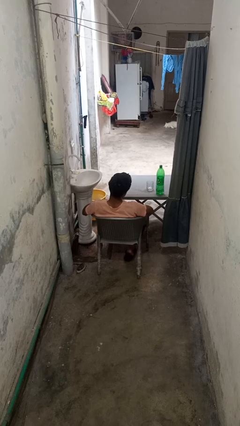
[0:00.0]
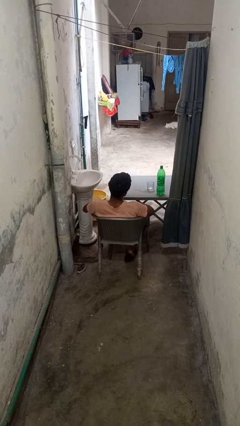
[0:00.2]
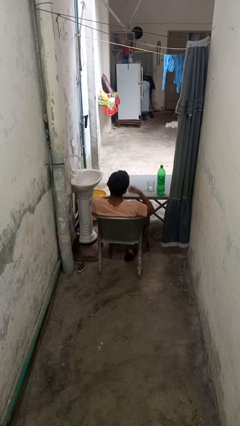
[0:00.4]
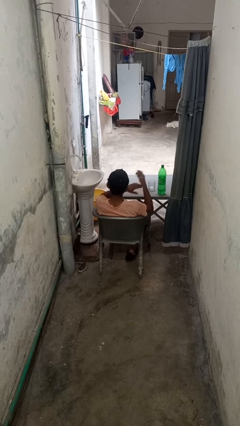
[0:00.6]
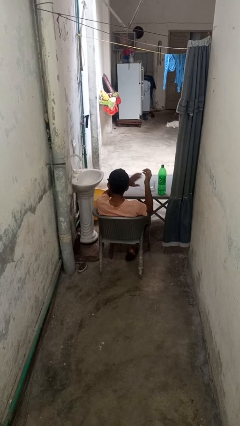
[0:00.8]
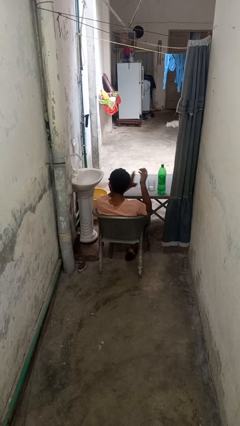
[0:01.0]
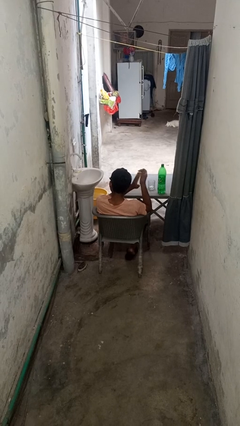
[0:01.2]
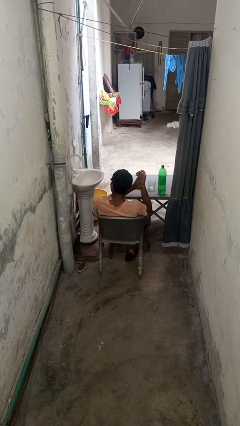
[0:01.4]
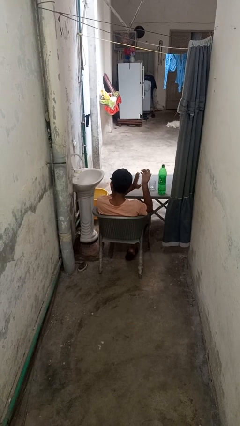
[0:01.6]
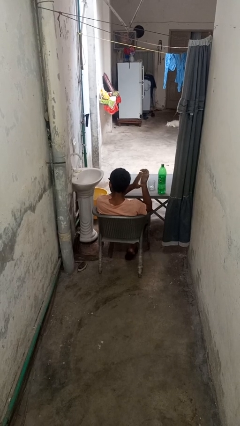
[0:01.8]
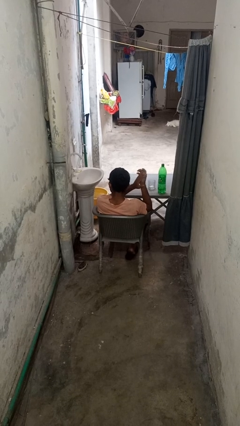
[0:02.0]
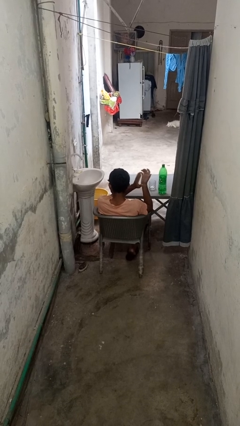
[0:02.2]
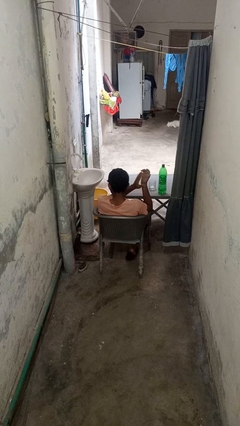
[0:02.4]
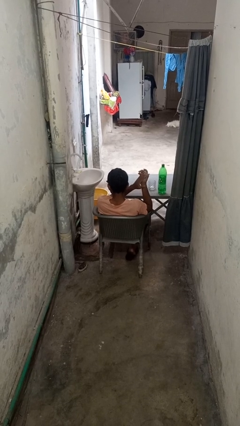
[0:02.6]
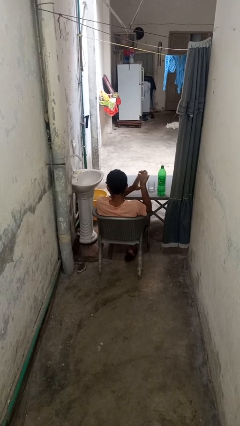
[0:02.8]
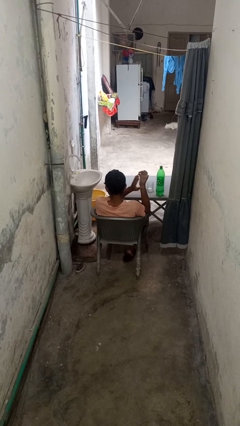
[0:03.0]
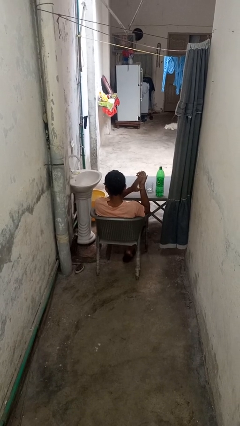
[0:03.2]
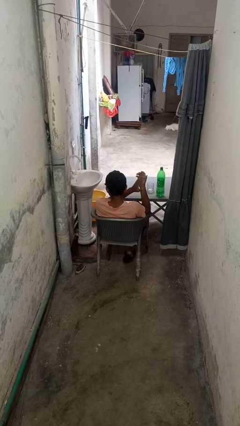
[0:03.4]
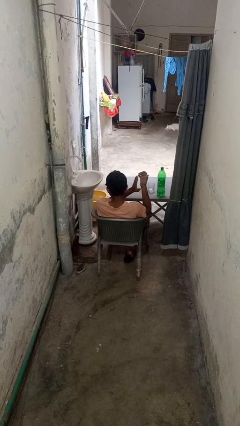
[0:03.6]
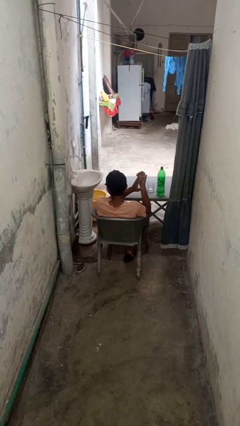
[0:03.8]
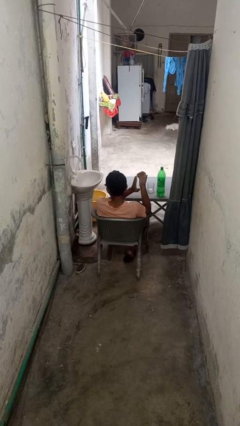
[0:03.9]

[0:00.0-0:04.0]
person claps hands

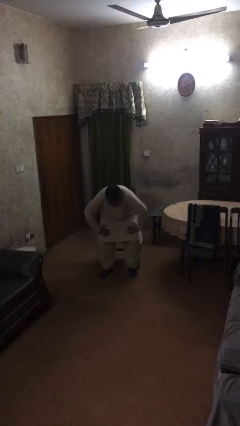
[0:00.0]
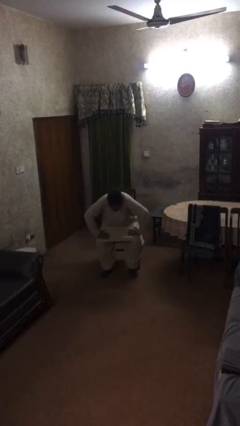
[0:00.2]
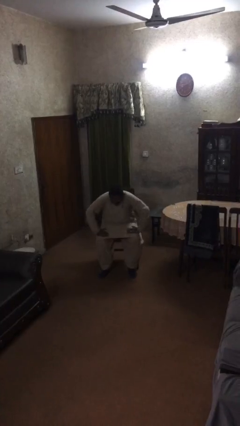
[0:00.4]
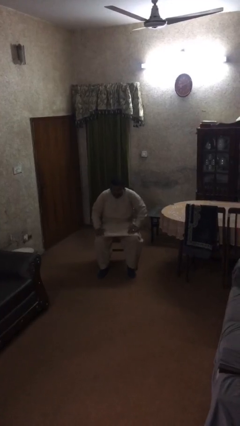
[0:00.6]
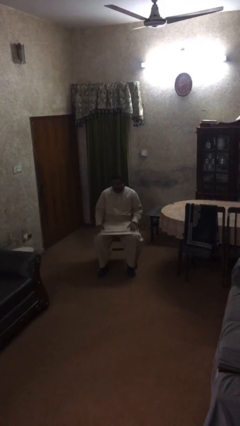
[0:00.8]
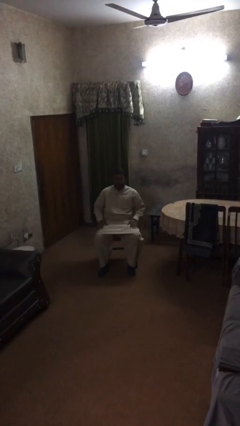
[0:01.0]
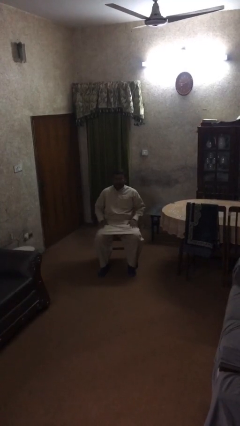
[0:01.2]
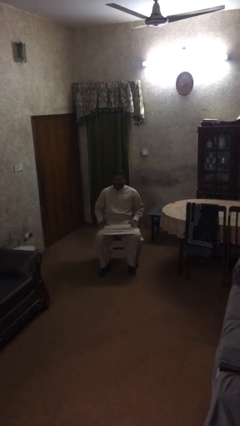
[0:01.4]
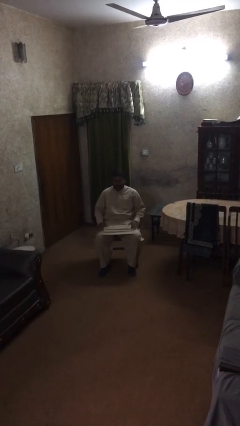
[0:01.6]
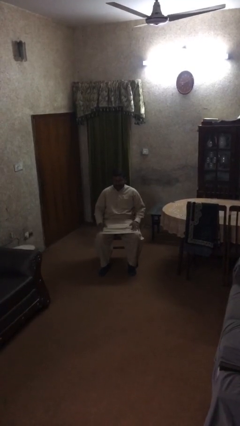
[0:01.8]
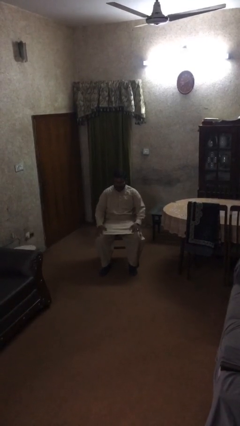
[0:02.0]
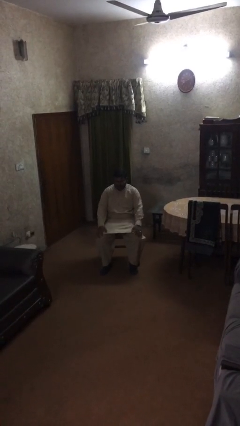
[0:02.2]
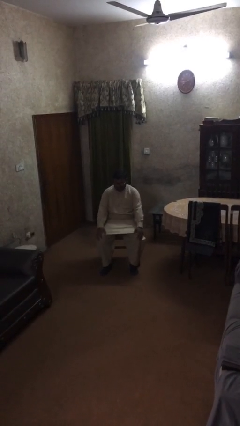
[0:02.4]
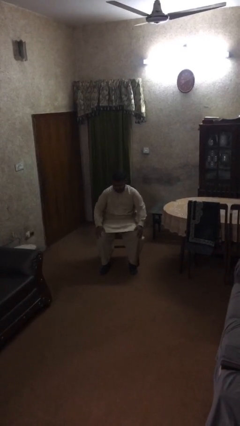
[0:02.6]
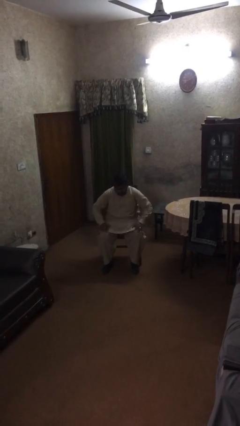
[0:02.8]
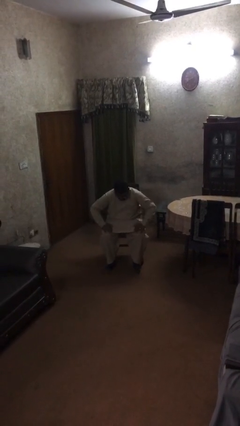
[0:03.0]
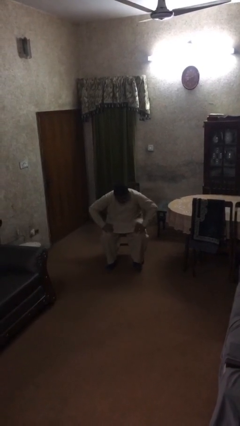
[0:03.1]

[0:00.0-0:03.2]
person sits down

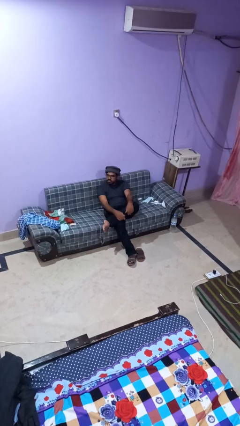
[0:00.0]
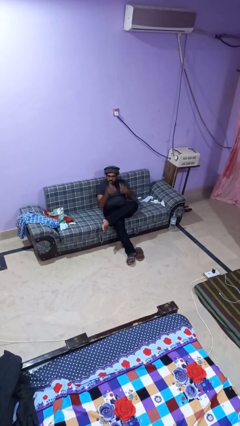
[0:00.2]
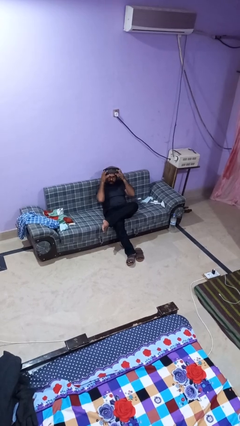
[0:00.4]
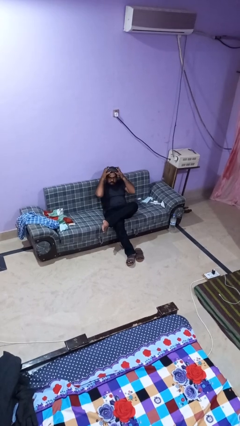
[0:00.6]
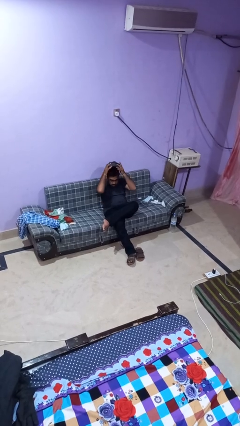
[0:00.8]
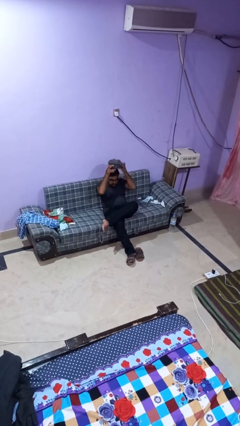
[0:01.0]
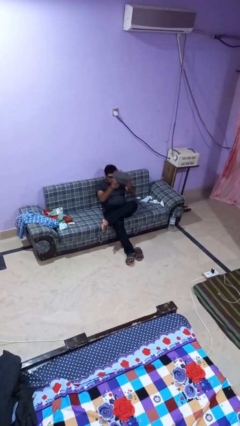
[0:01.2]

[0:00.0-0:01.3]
person takes off hat

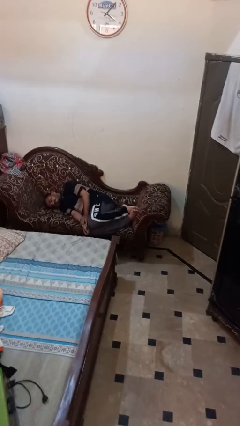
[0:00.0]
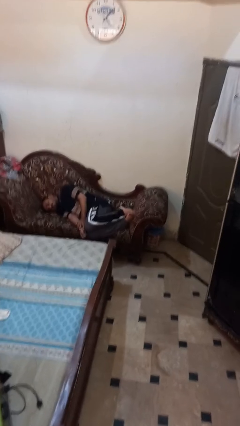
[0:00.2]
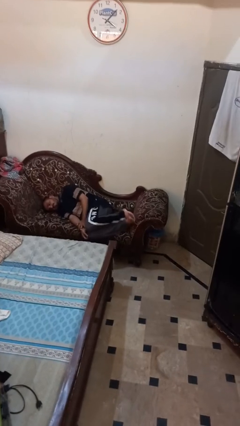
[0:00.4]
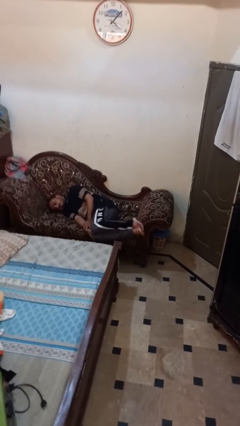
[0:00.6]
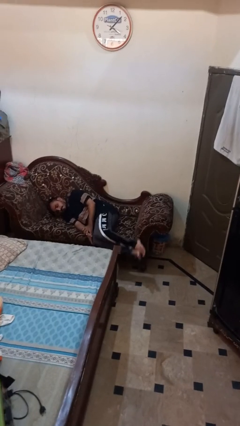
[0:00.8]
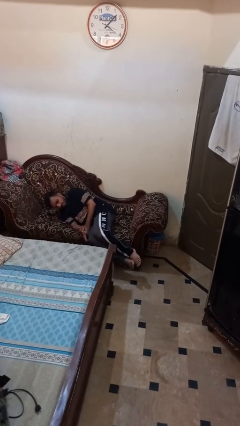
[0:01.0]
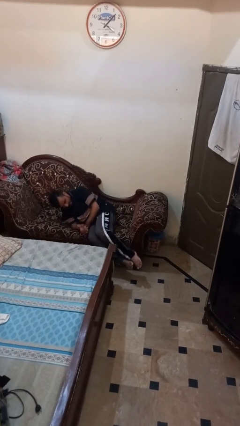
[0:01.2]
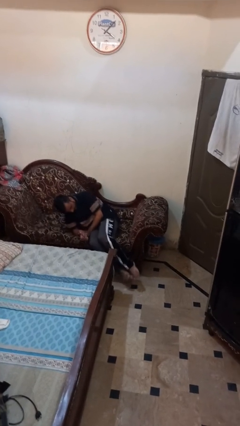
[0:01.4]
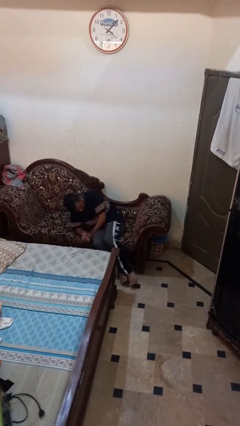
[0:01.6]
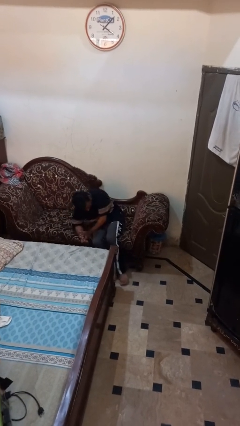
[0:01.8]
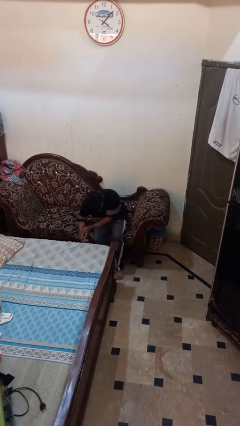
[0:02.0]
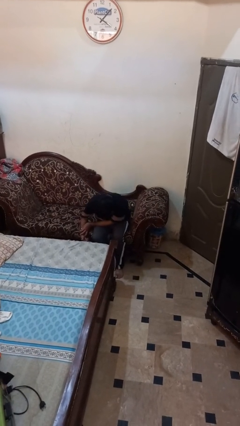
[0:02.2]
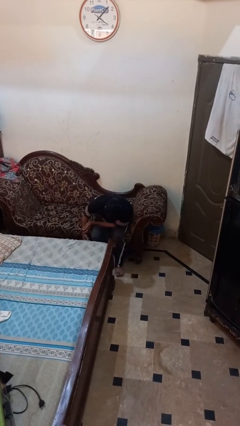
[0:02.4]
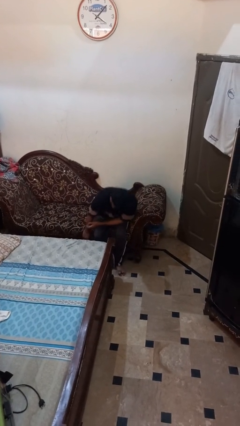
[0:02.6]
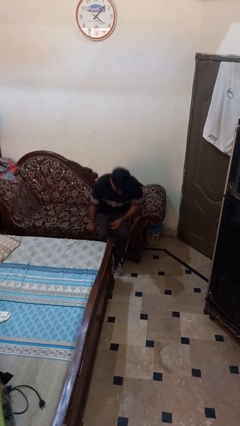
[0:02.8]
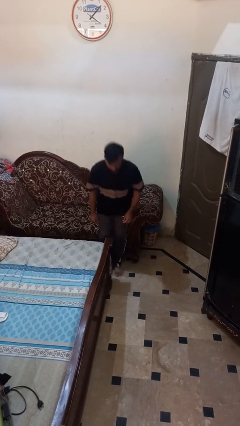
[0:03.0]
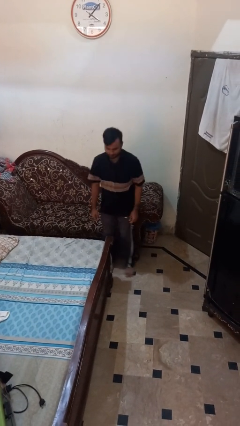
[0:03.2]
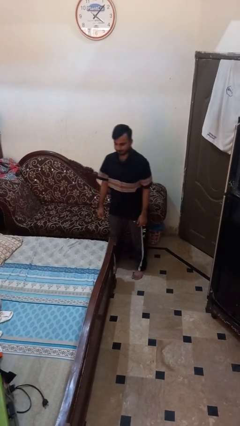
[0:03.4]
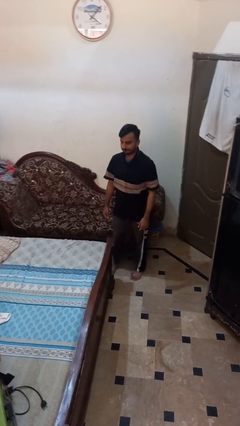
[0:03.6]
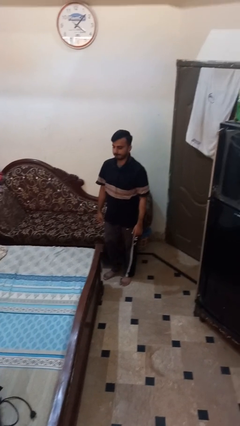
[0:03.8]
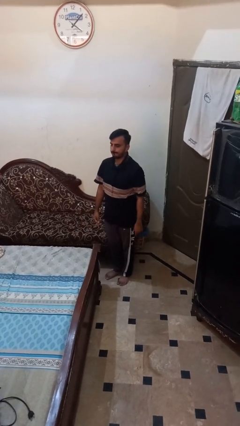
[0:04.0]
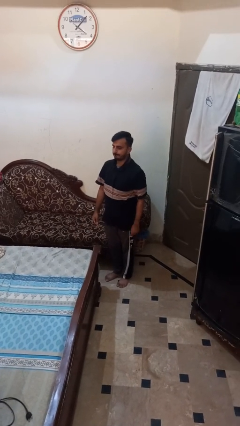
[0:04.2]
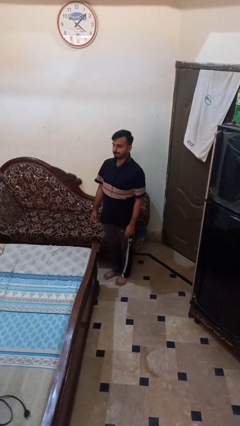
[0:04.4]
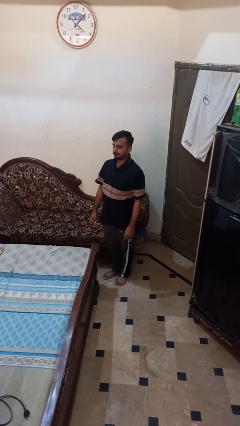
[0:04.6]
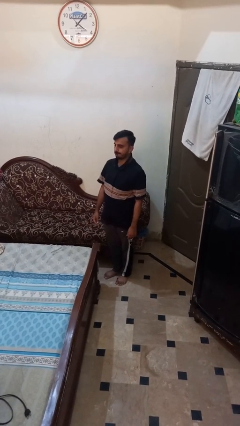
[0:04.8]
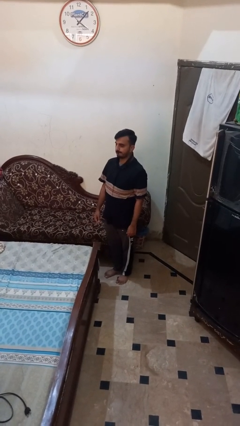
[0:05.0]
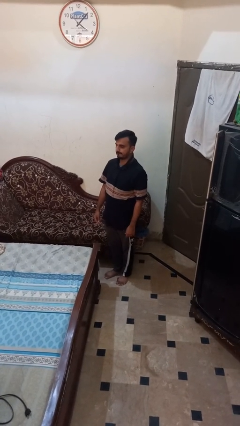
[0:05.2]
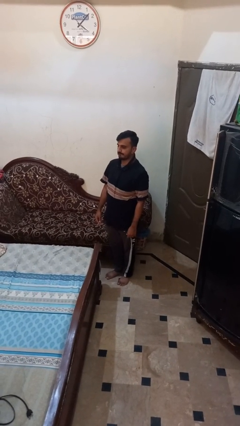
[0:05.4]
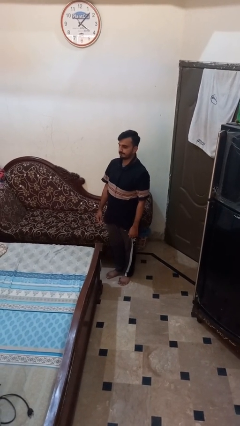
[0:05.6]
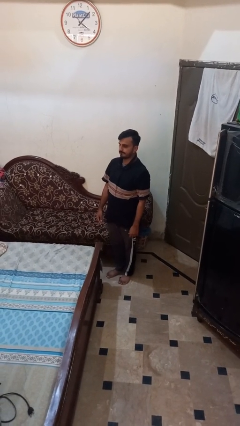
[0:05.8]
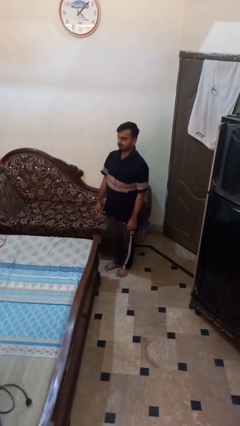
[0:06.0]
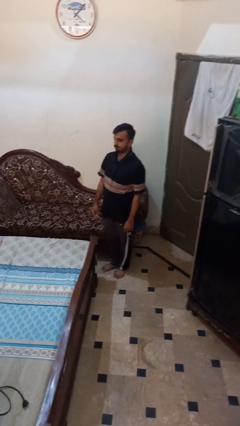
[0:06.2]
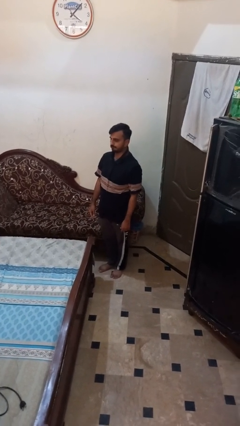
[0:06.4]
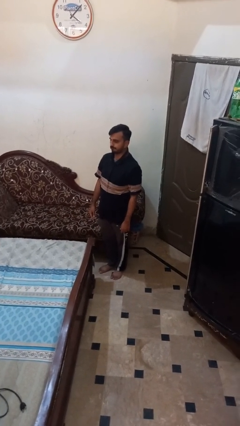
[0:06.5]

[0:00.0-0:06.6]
person stands up

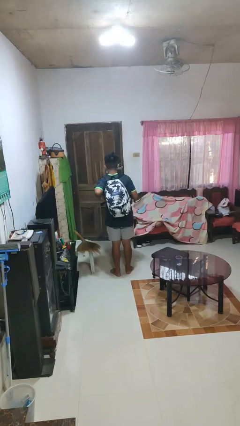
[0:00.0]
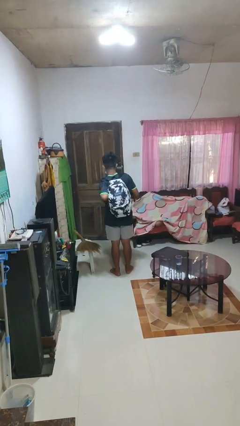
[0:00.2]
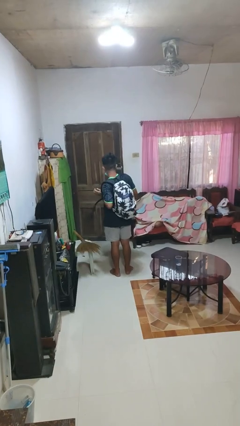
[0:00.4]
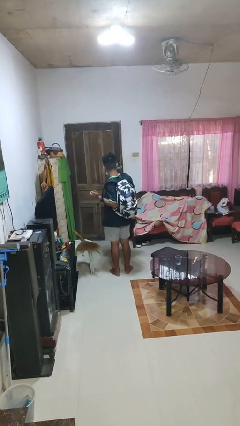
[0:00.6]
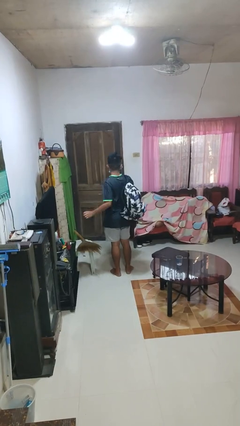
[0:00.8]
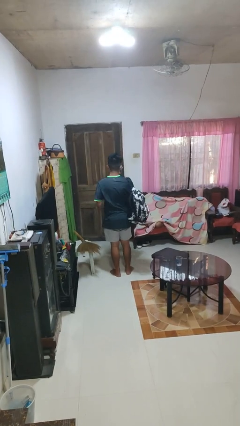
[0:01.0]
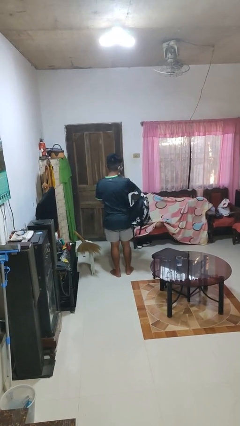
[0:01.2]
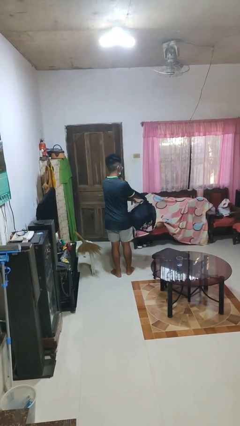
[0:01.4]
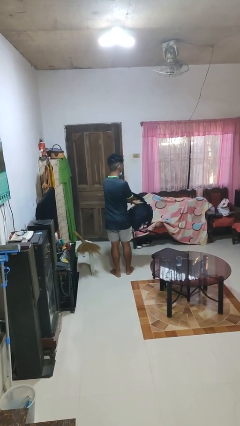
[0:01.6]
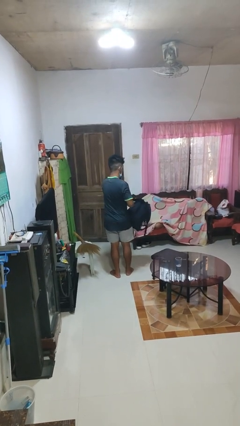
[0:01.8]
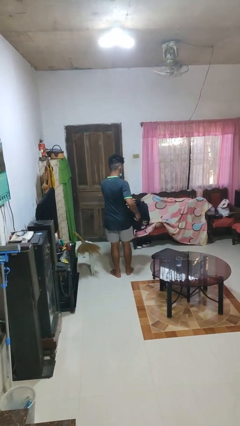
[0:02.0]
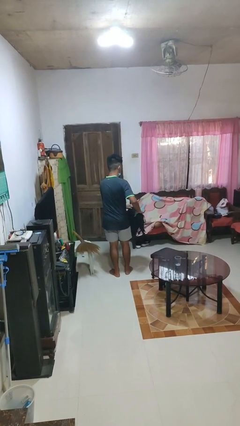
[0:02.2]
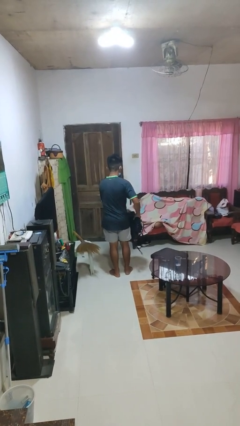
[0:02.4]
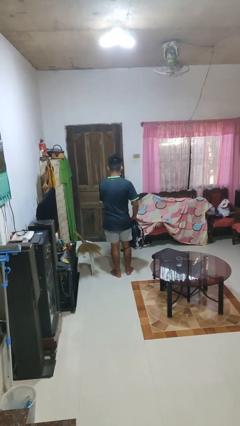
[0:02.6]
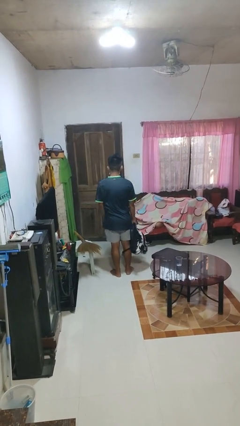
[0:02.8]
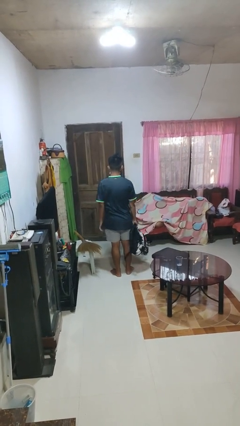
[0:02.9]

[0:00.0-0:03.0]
person takes off backpack
